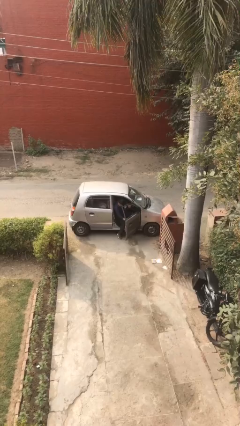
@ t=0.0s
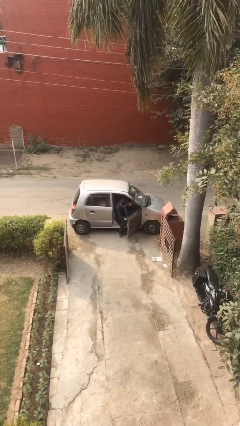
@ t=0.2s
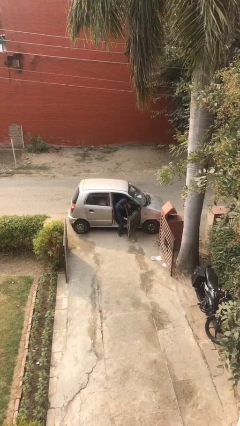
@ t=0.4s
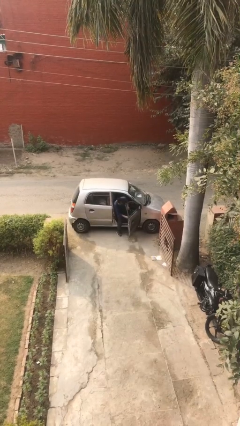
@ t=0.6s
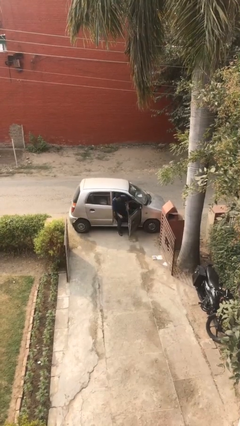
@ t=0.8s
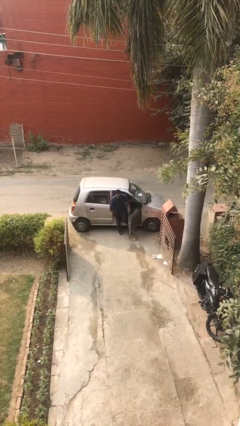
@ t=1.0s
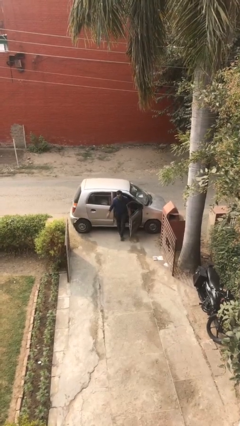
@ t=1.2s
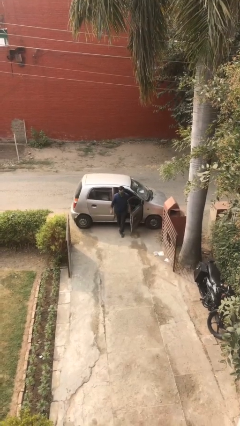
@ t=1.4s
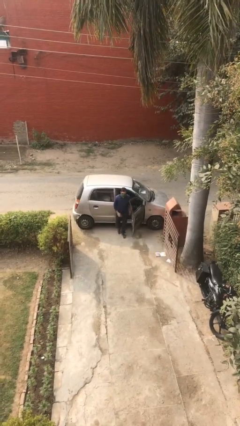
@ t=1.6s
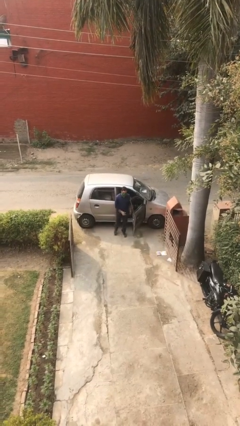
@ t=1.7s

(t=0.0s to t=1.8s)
person exits car

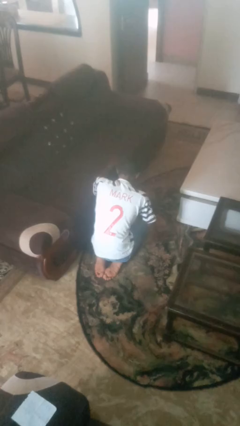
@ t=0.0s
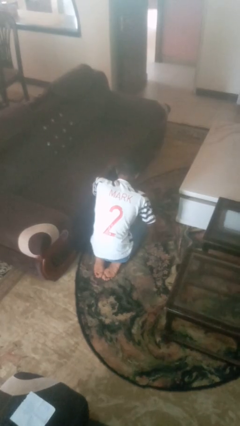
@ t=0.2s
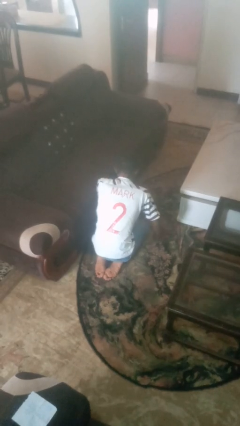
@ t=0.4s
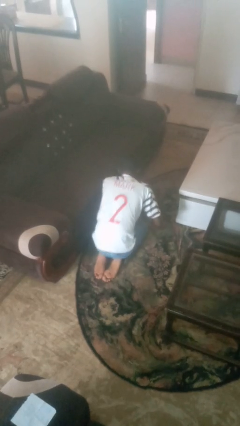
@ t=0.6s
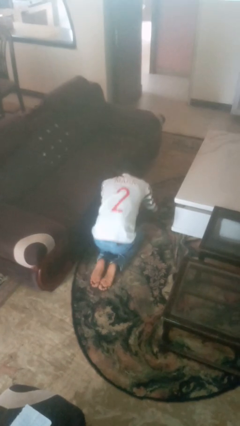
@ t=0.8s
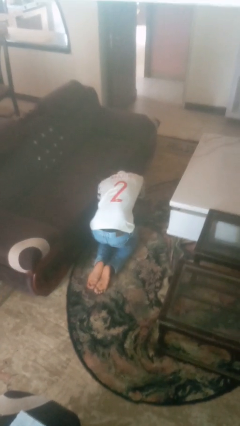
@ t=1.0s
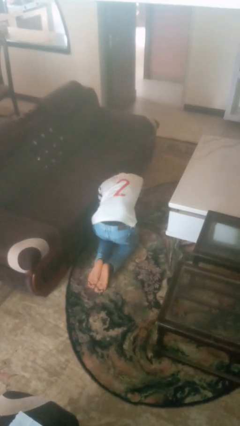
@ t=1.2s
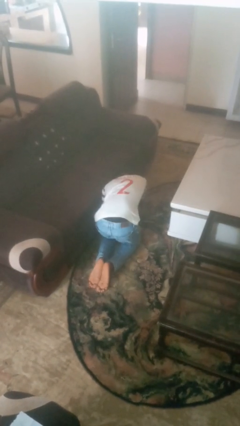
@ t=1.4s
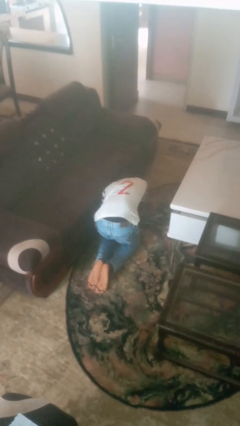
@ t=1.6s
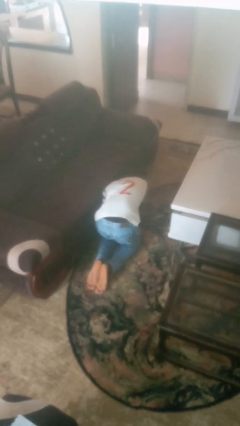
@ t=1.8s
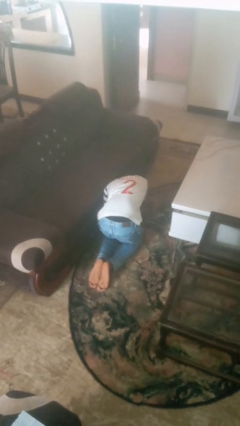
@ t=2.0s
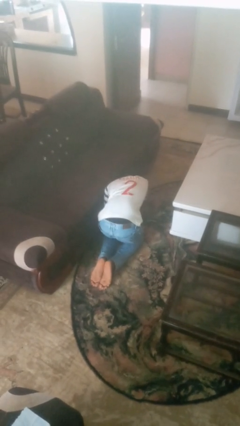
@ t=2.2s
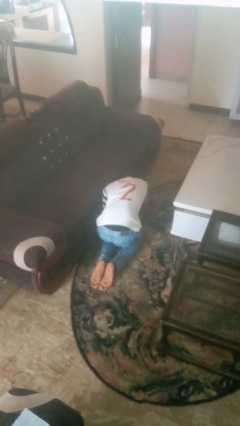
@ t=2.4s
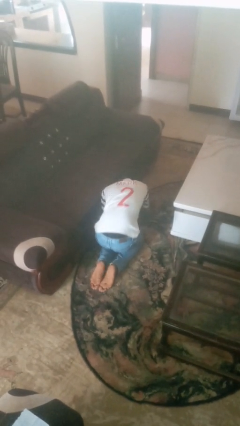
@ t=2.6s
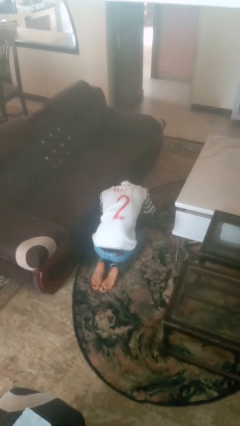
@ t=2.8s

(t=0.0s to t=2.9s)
person searches under couch

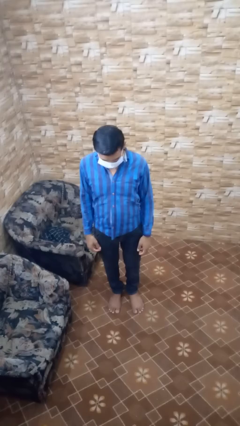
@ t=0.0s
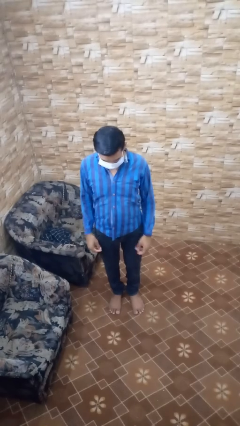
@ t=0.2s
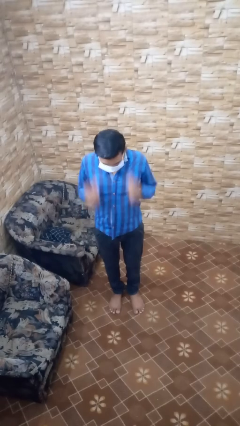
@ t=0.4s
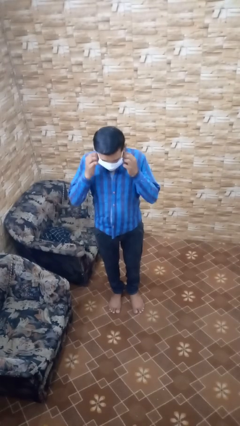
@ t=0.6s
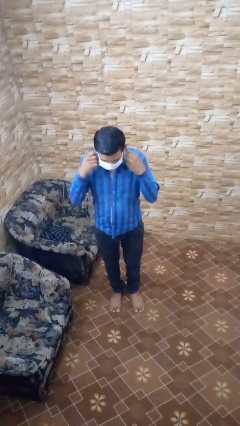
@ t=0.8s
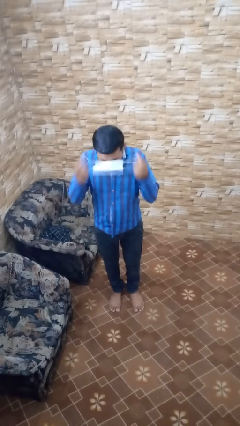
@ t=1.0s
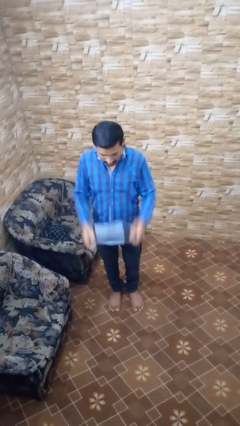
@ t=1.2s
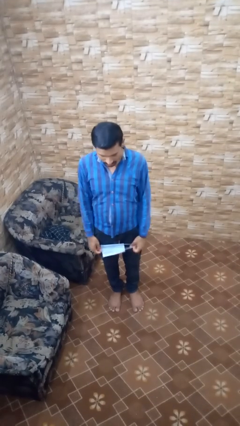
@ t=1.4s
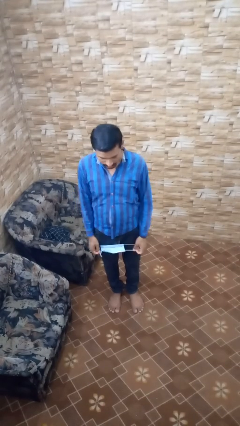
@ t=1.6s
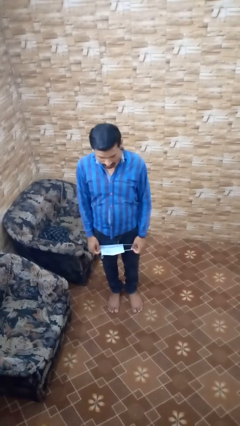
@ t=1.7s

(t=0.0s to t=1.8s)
person takes off facemask

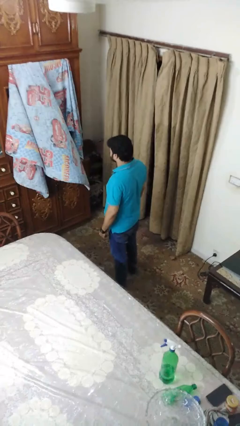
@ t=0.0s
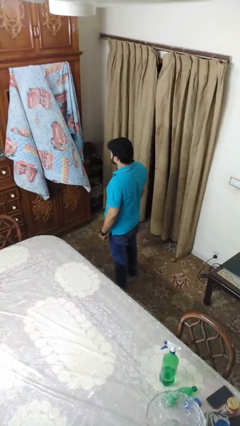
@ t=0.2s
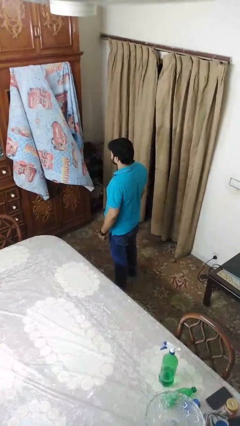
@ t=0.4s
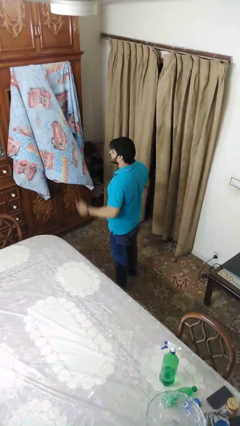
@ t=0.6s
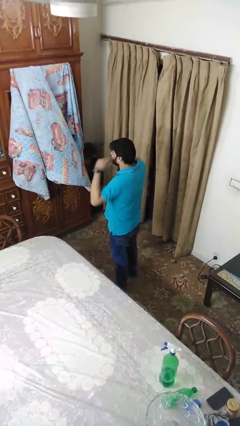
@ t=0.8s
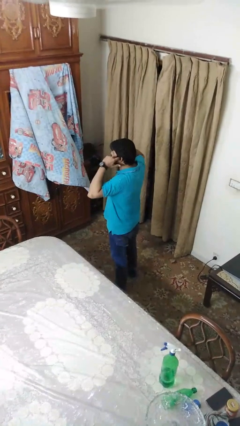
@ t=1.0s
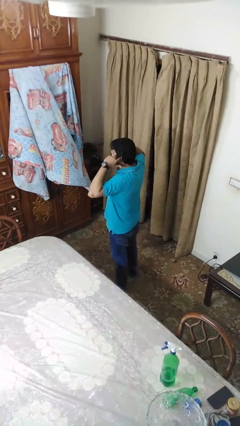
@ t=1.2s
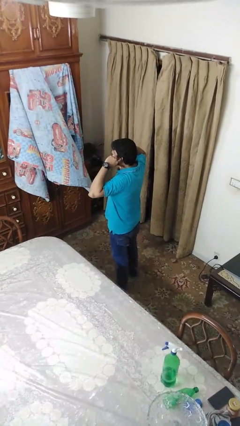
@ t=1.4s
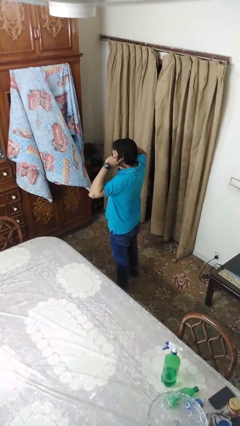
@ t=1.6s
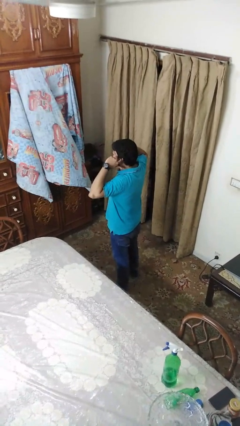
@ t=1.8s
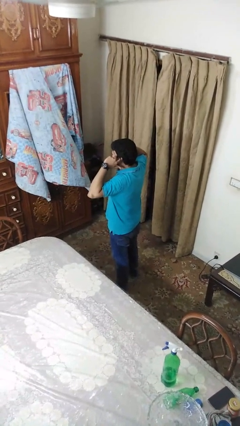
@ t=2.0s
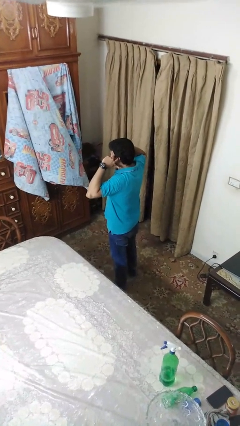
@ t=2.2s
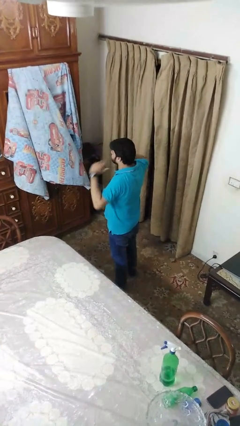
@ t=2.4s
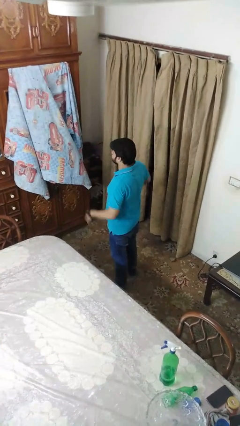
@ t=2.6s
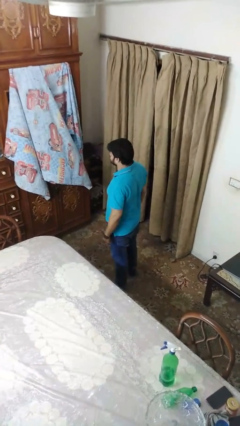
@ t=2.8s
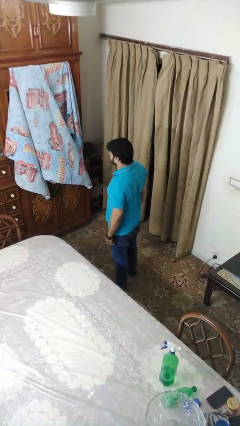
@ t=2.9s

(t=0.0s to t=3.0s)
person puts fingers in ear

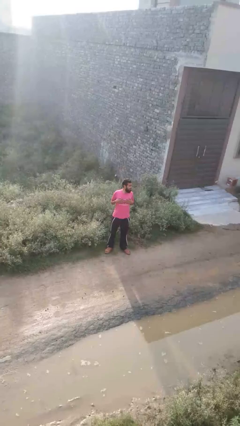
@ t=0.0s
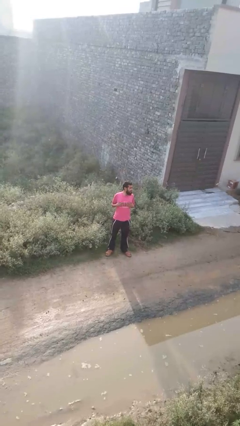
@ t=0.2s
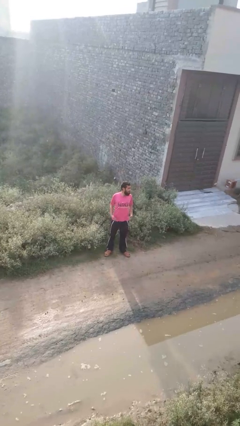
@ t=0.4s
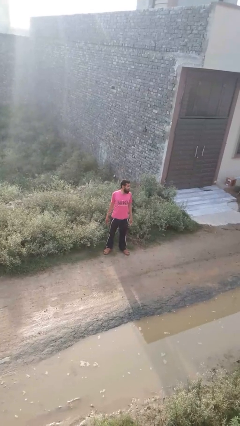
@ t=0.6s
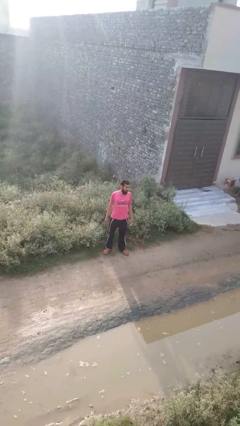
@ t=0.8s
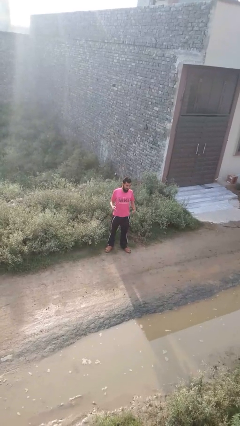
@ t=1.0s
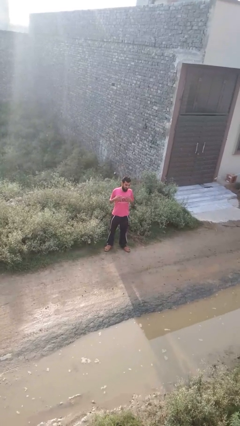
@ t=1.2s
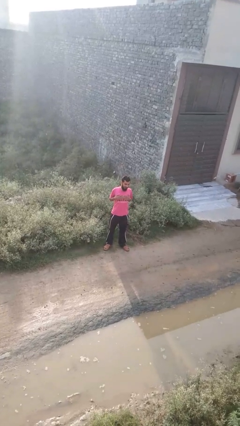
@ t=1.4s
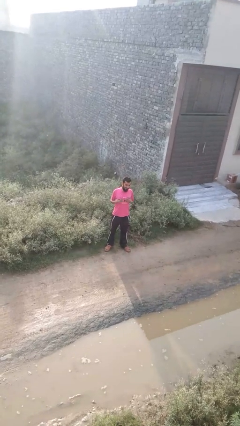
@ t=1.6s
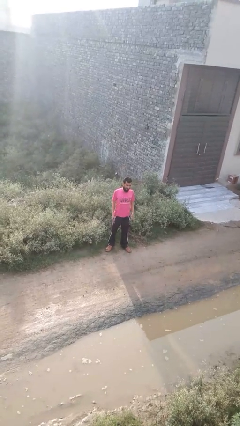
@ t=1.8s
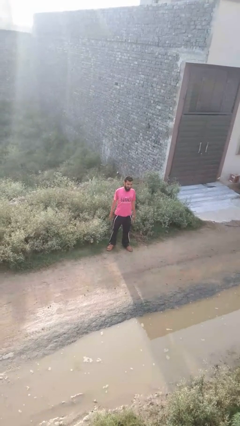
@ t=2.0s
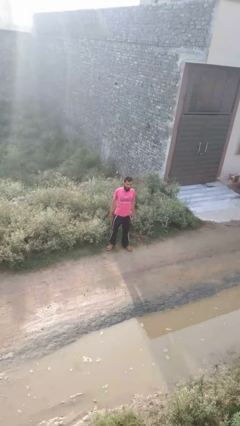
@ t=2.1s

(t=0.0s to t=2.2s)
person drums on chest

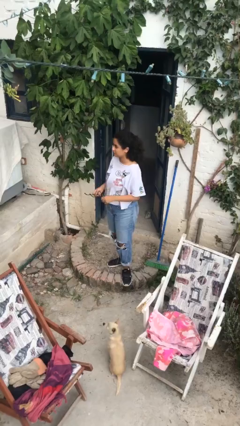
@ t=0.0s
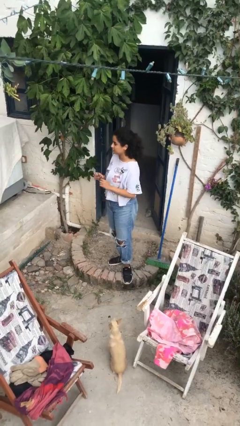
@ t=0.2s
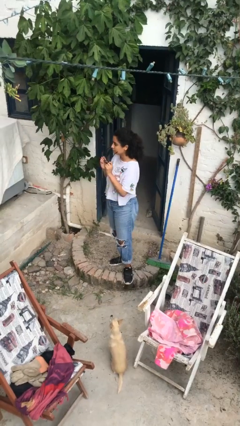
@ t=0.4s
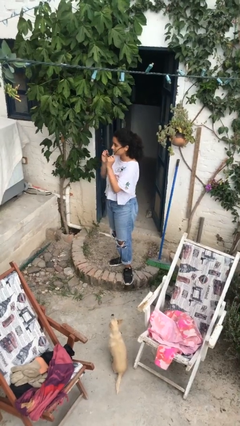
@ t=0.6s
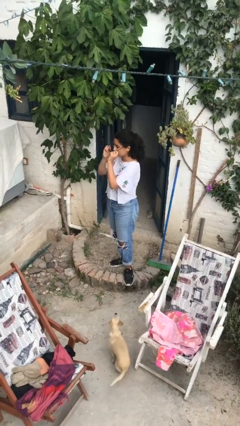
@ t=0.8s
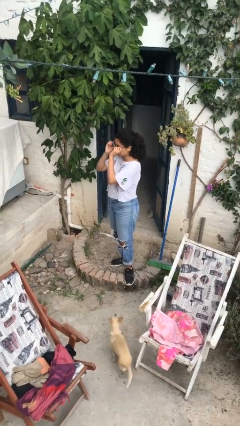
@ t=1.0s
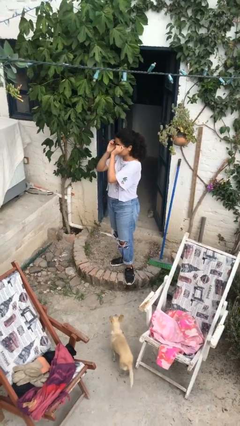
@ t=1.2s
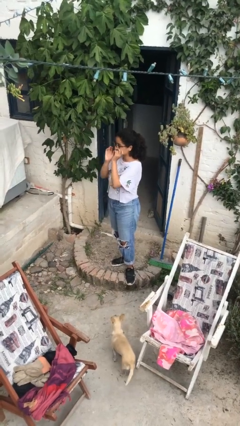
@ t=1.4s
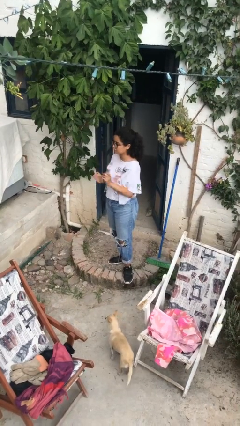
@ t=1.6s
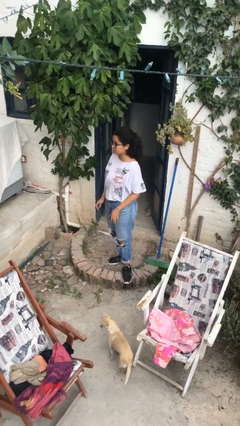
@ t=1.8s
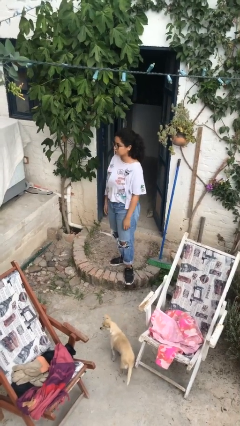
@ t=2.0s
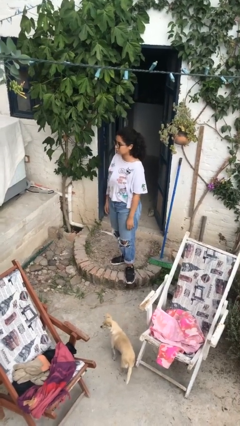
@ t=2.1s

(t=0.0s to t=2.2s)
person puts on glasses

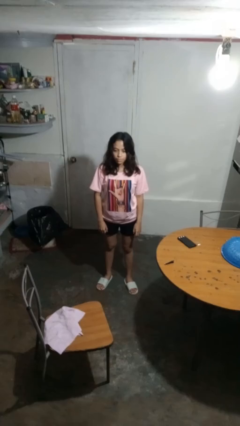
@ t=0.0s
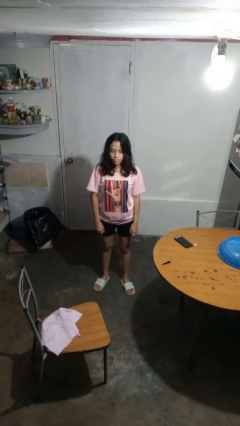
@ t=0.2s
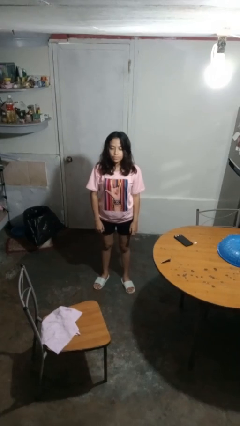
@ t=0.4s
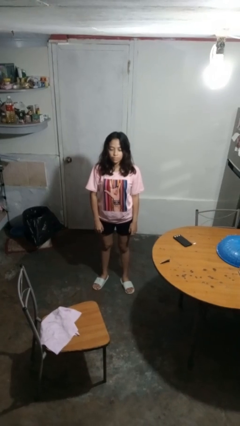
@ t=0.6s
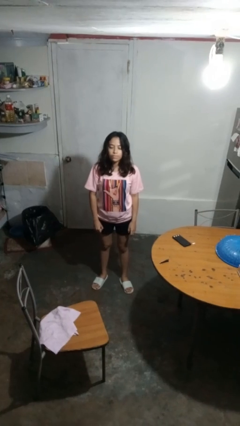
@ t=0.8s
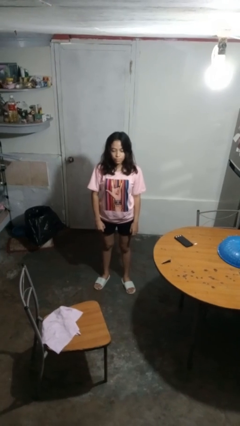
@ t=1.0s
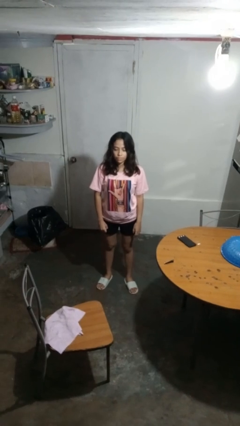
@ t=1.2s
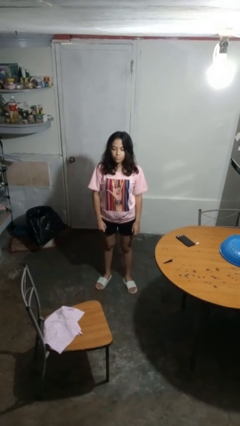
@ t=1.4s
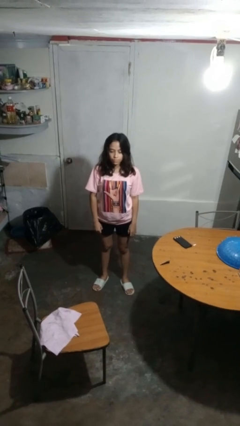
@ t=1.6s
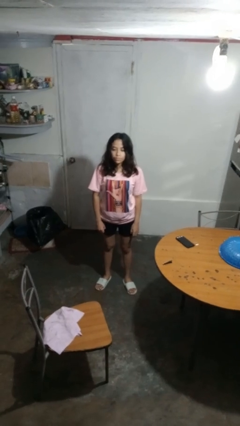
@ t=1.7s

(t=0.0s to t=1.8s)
person nods head

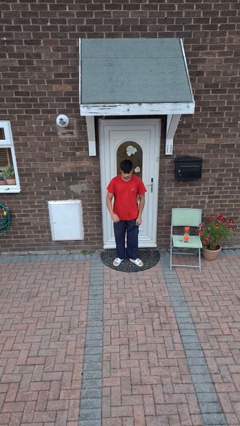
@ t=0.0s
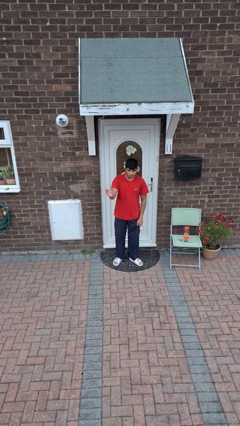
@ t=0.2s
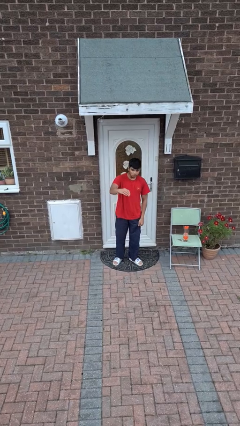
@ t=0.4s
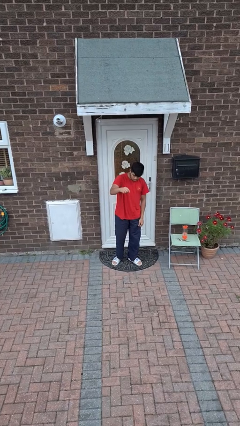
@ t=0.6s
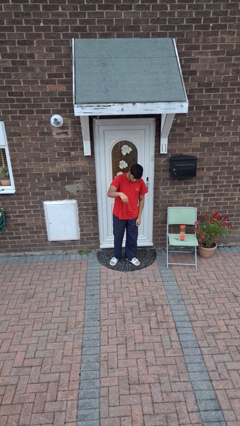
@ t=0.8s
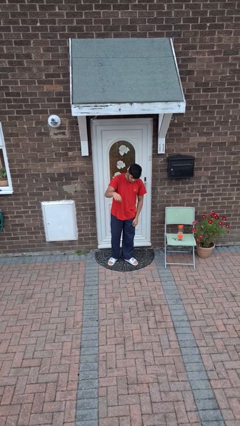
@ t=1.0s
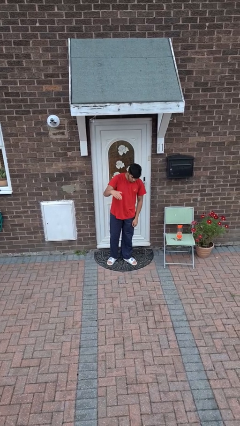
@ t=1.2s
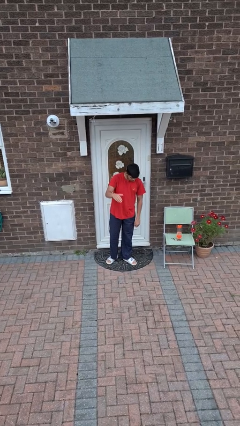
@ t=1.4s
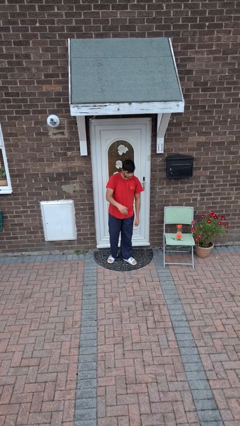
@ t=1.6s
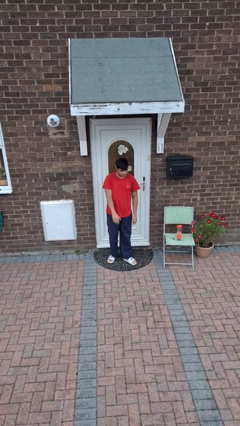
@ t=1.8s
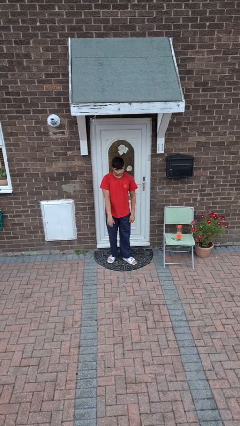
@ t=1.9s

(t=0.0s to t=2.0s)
person gestures come here
